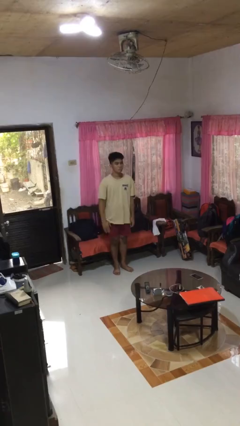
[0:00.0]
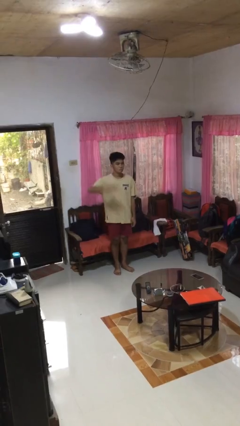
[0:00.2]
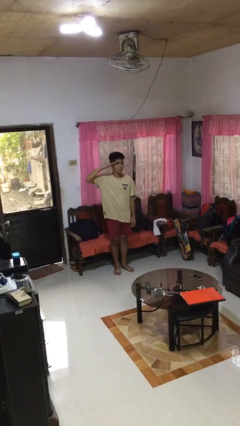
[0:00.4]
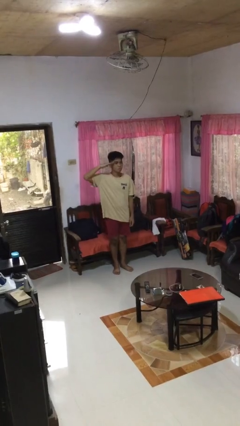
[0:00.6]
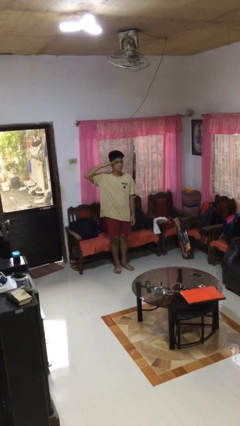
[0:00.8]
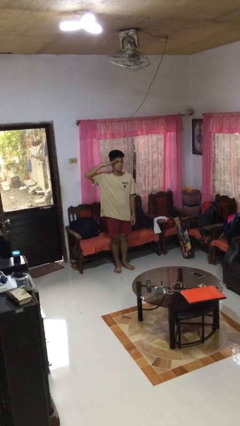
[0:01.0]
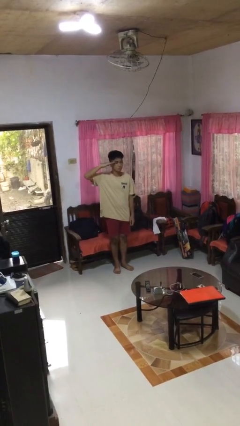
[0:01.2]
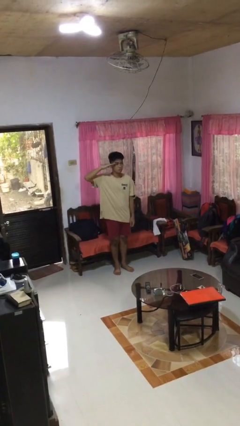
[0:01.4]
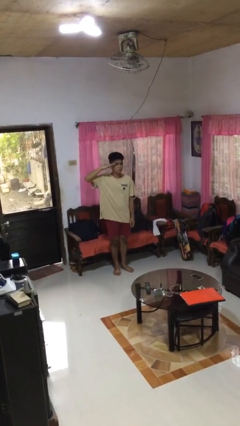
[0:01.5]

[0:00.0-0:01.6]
person salutes

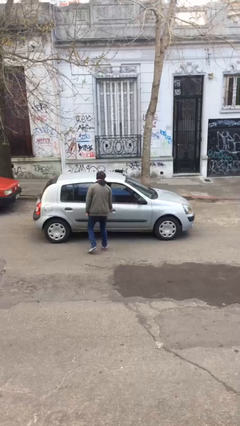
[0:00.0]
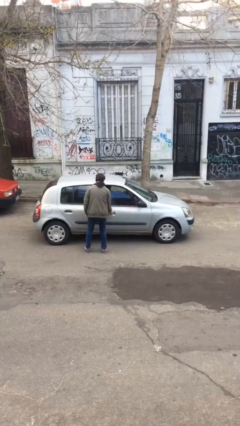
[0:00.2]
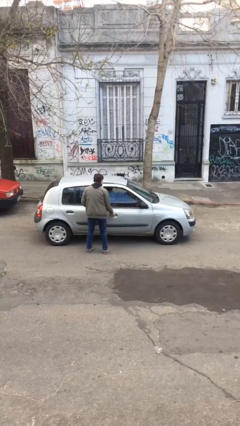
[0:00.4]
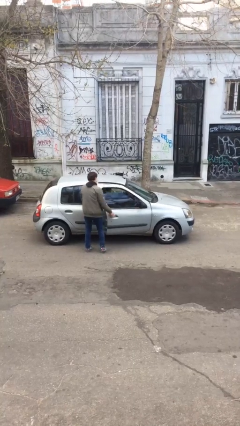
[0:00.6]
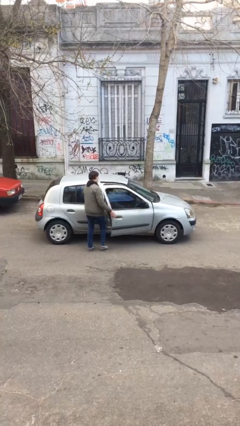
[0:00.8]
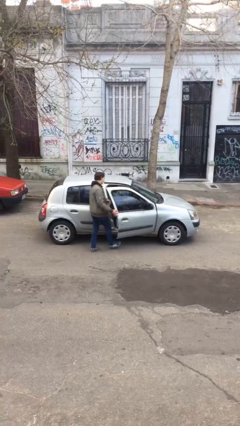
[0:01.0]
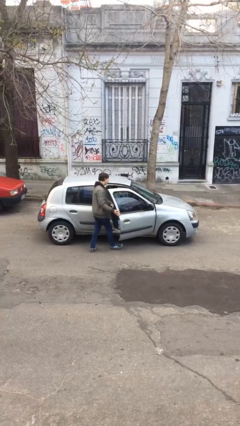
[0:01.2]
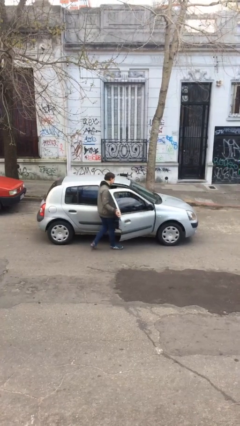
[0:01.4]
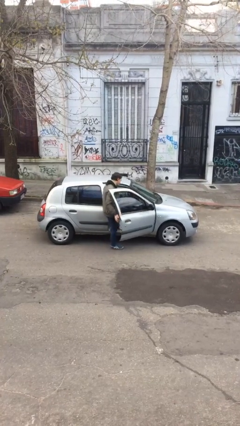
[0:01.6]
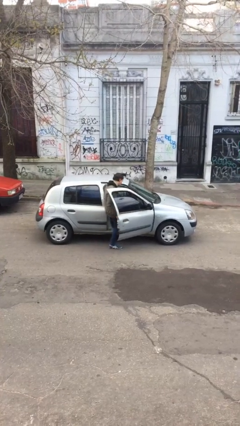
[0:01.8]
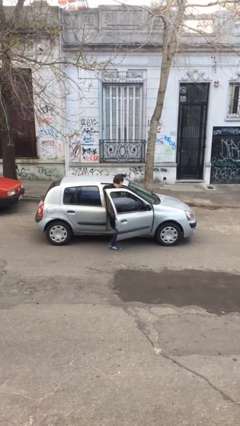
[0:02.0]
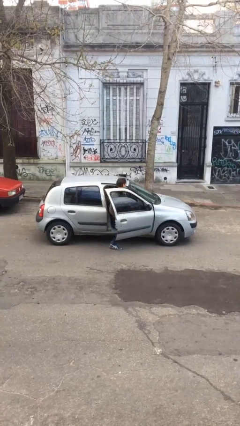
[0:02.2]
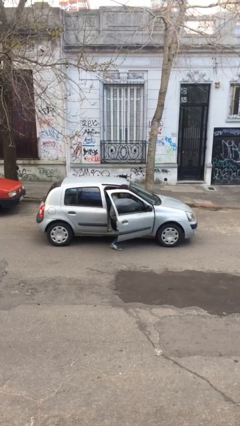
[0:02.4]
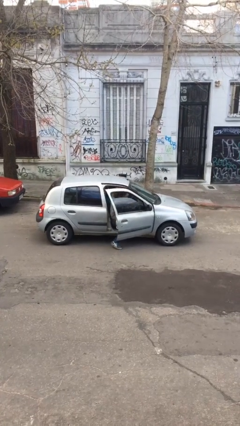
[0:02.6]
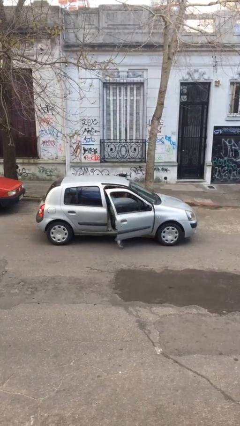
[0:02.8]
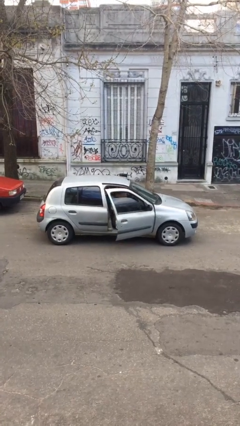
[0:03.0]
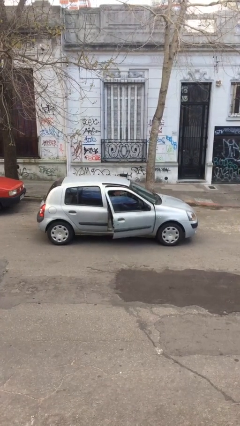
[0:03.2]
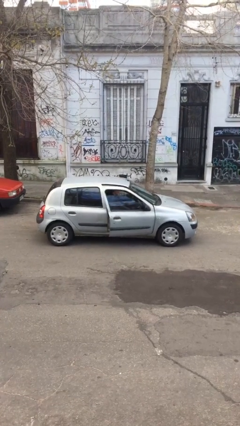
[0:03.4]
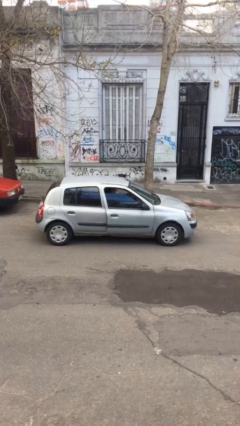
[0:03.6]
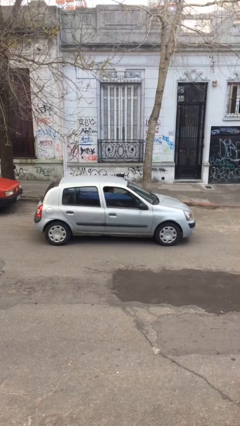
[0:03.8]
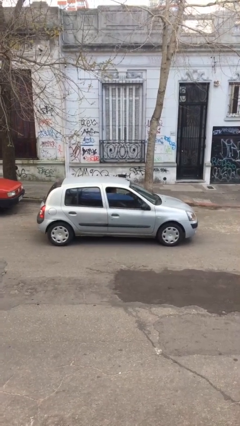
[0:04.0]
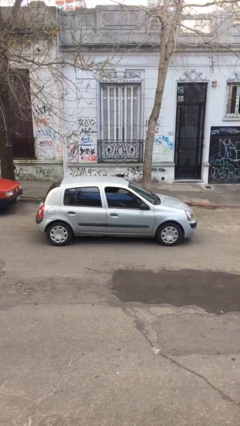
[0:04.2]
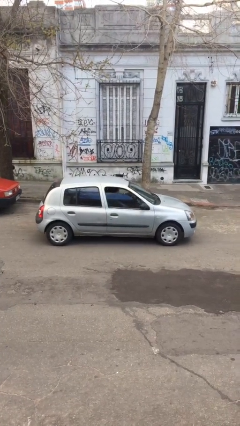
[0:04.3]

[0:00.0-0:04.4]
car picks up person

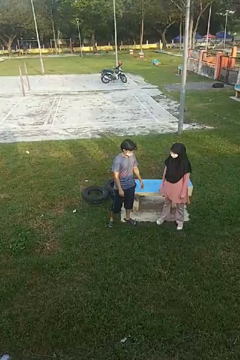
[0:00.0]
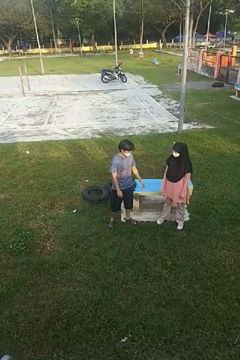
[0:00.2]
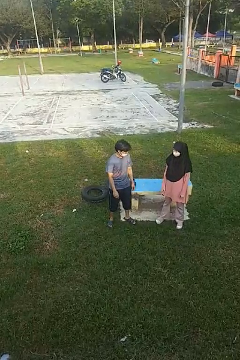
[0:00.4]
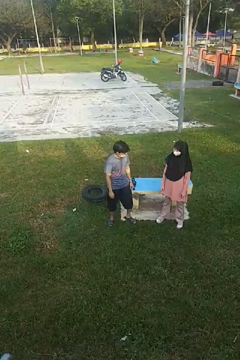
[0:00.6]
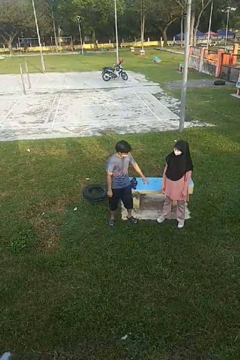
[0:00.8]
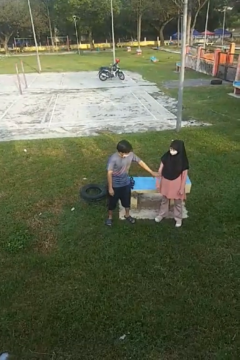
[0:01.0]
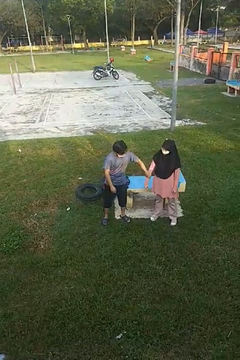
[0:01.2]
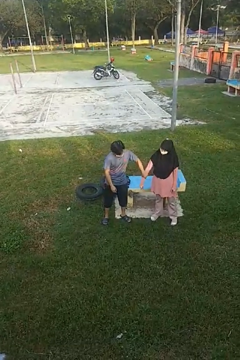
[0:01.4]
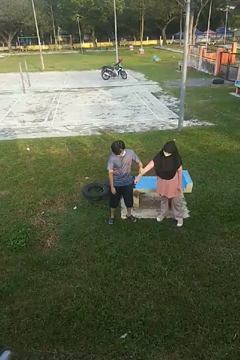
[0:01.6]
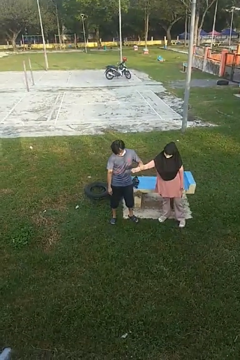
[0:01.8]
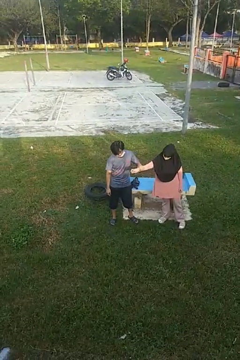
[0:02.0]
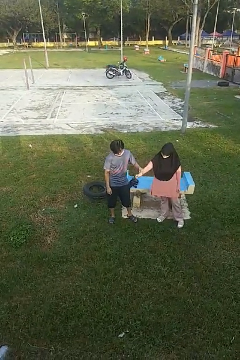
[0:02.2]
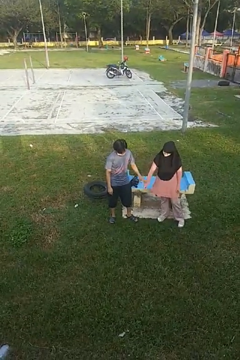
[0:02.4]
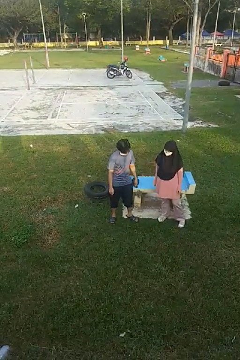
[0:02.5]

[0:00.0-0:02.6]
person grabs person by forearm

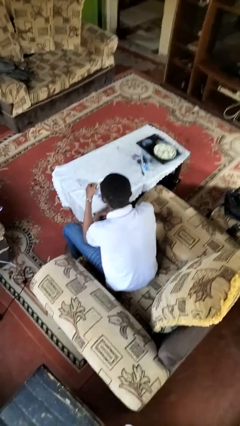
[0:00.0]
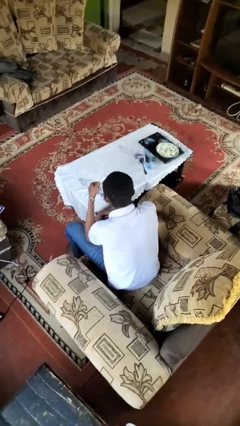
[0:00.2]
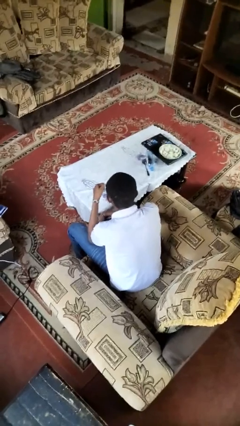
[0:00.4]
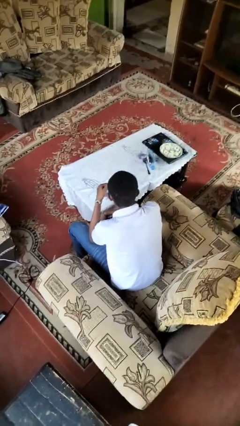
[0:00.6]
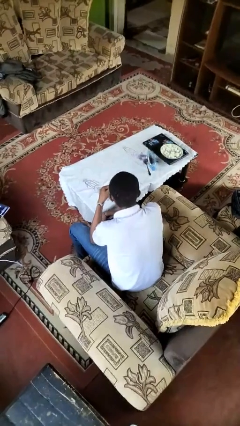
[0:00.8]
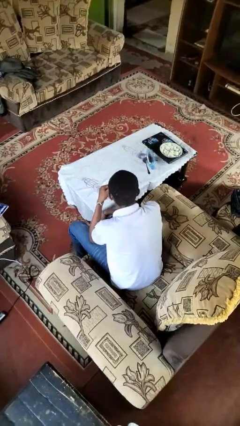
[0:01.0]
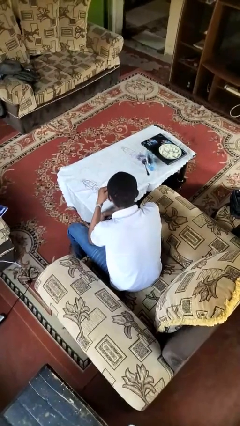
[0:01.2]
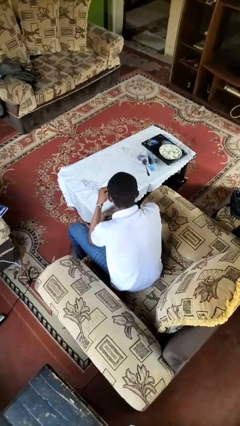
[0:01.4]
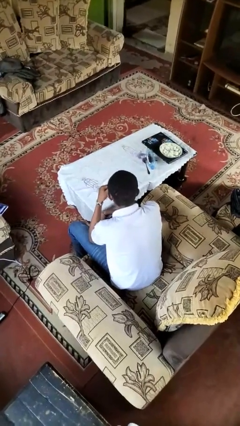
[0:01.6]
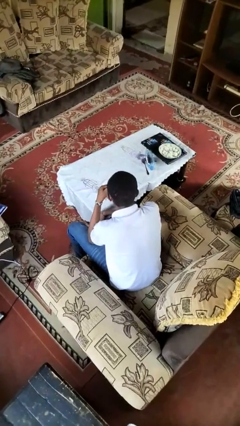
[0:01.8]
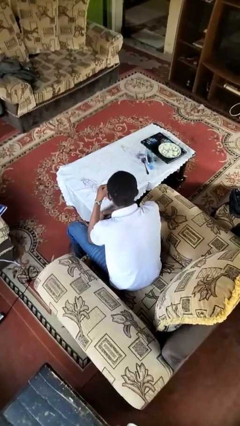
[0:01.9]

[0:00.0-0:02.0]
person drinks from mug

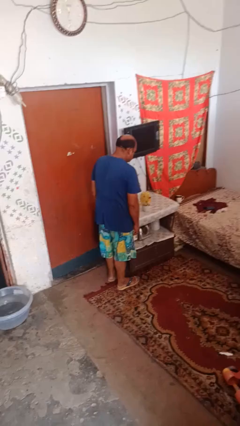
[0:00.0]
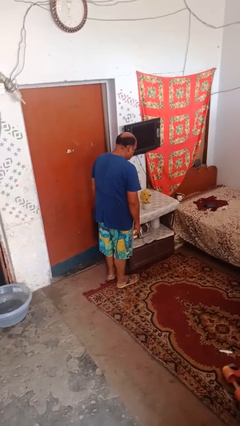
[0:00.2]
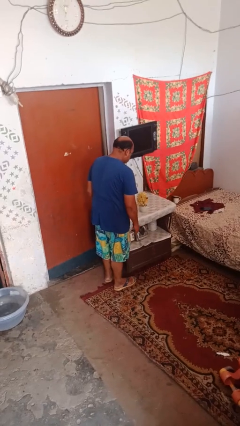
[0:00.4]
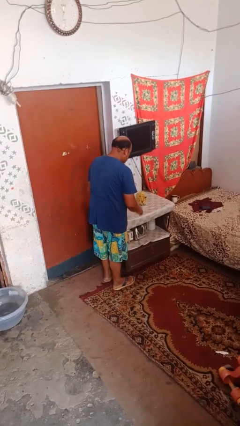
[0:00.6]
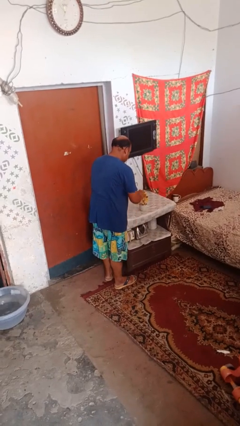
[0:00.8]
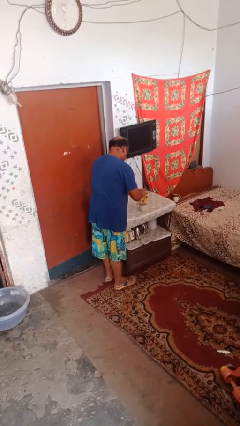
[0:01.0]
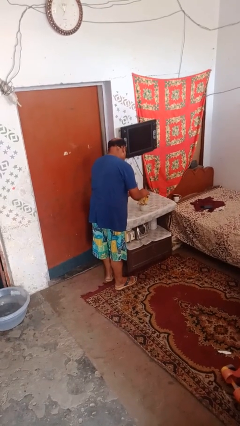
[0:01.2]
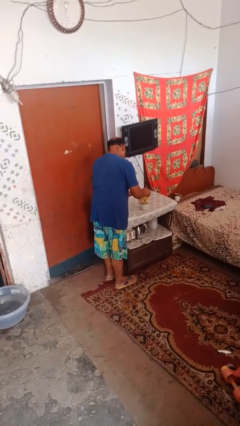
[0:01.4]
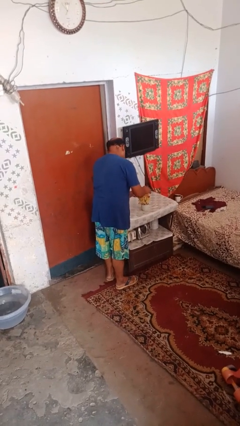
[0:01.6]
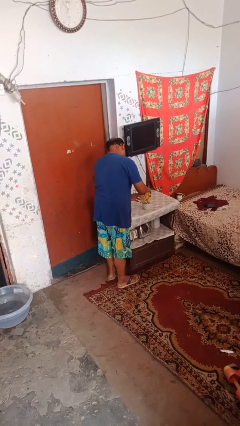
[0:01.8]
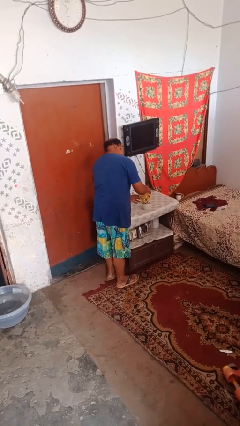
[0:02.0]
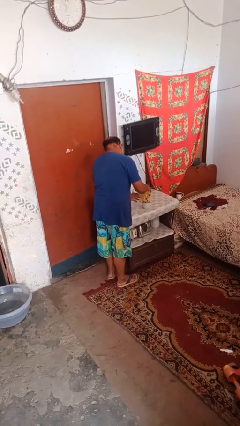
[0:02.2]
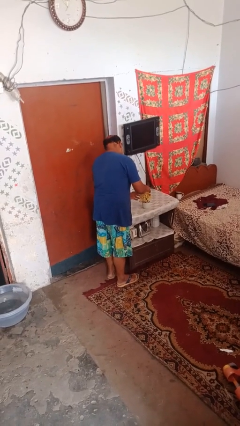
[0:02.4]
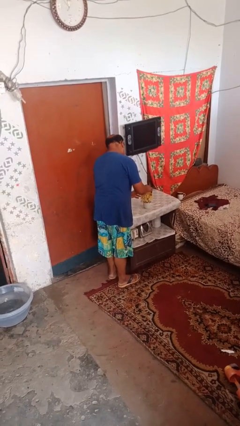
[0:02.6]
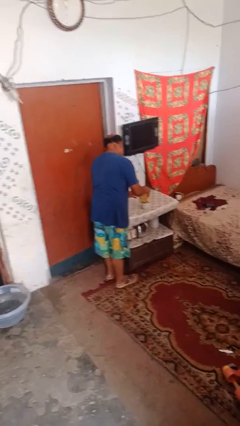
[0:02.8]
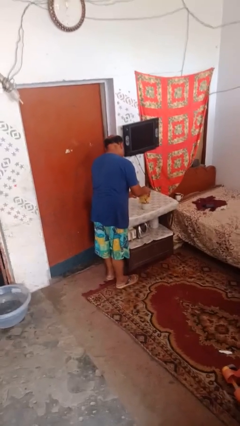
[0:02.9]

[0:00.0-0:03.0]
person arranges flowers in vase

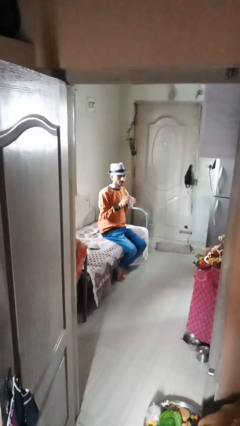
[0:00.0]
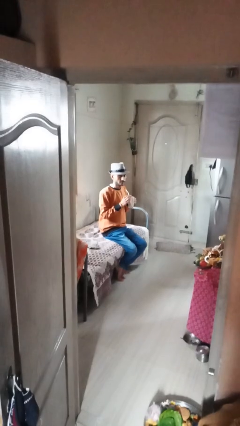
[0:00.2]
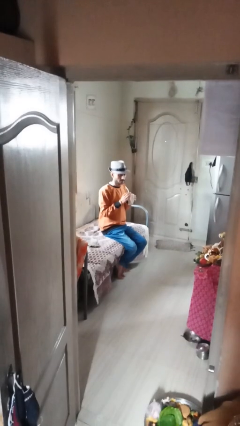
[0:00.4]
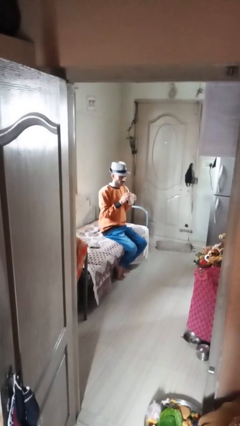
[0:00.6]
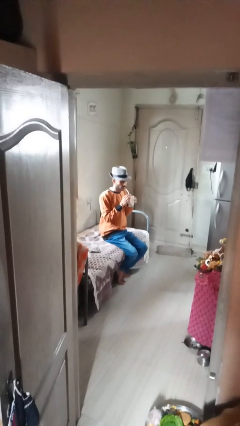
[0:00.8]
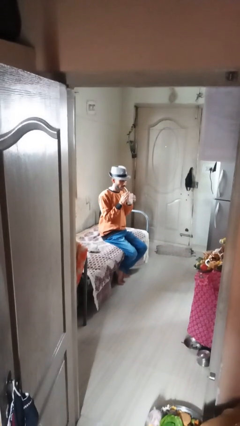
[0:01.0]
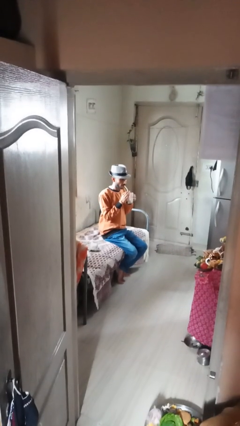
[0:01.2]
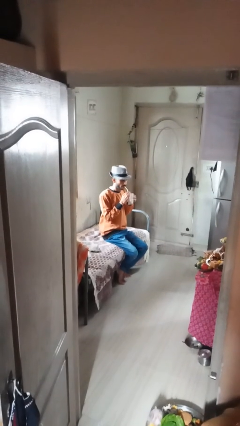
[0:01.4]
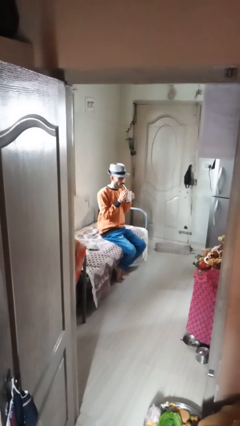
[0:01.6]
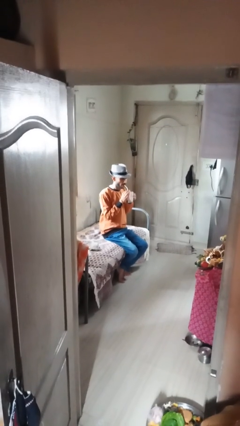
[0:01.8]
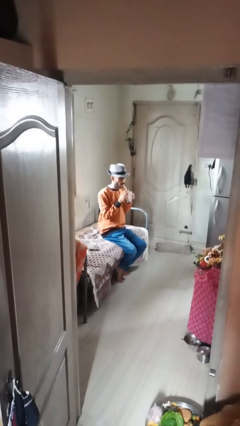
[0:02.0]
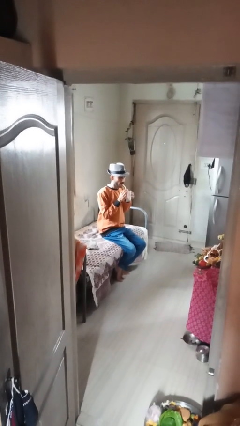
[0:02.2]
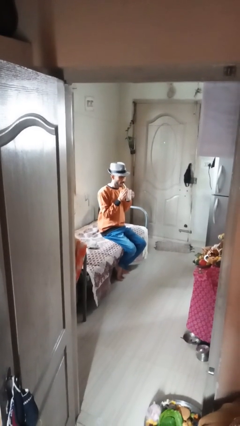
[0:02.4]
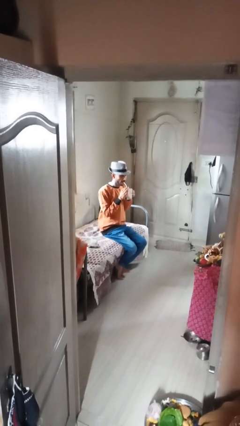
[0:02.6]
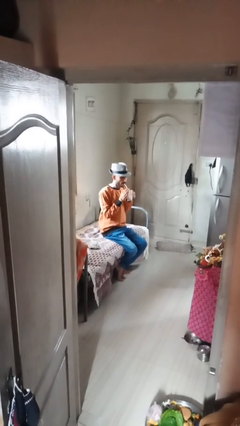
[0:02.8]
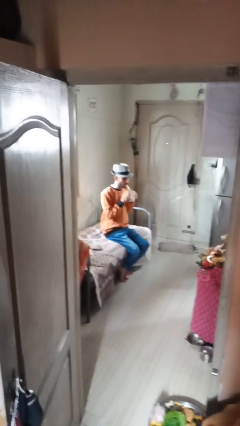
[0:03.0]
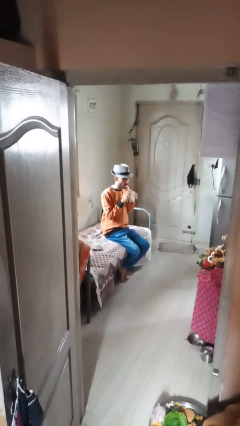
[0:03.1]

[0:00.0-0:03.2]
person drinks from straw

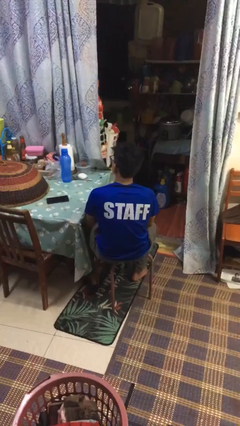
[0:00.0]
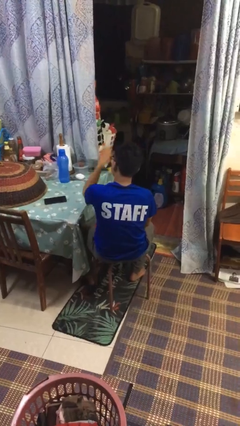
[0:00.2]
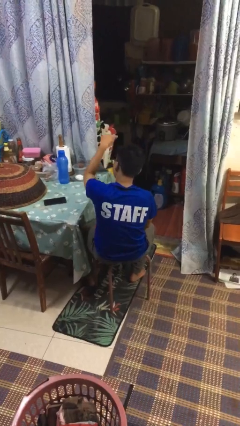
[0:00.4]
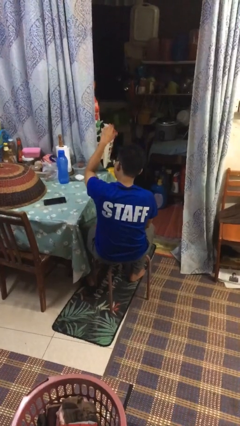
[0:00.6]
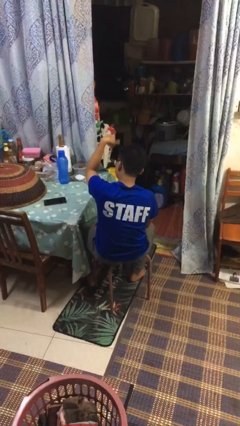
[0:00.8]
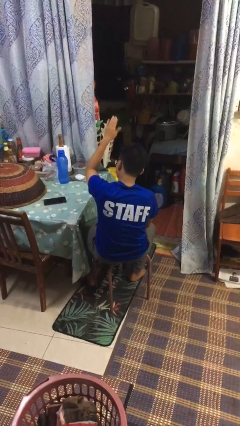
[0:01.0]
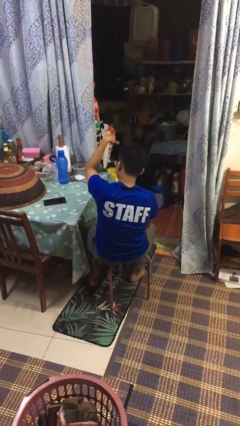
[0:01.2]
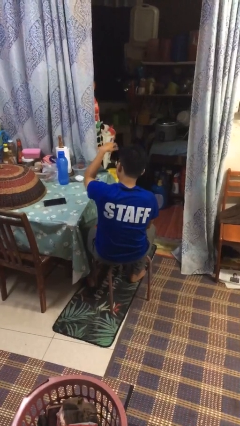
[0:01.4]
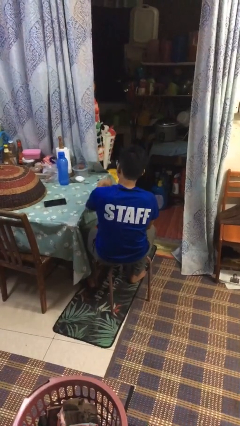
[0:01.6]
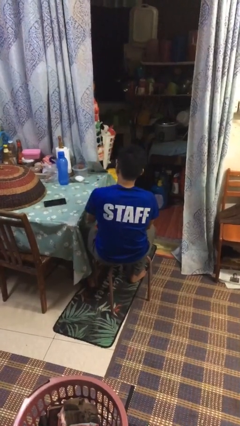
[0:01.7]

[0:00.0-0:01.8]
person gestures come here
